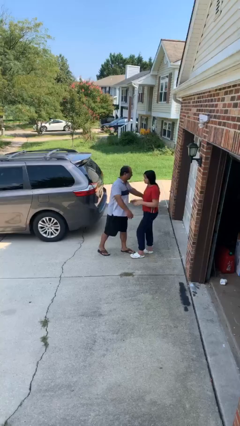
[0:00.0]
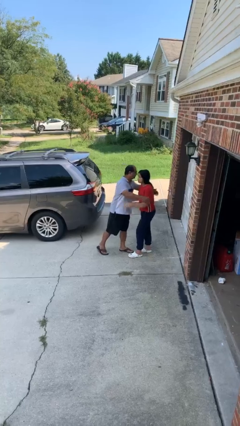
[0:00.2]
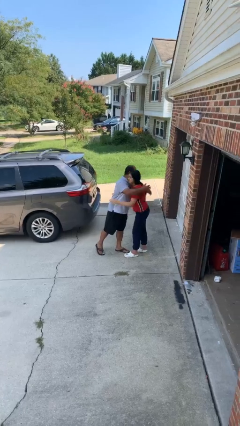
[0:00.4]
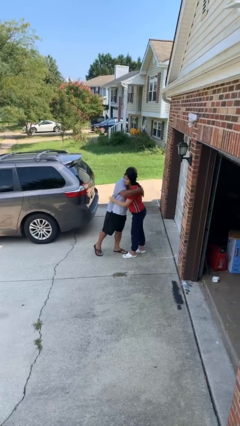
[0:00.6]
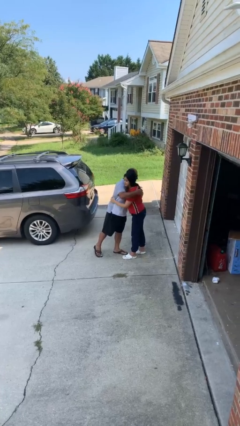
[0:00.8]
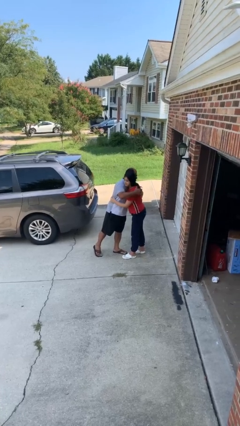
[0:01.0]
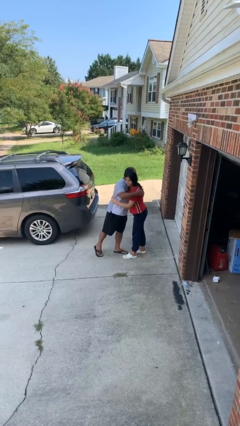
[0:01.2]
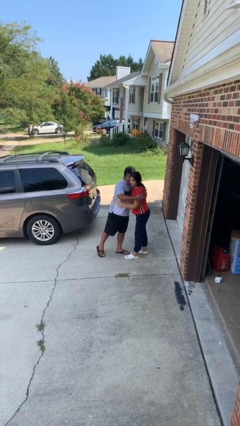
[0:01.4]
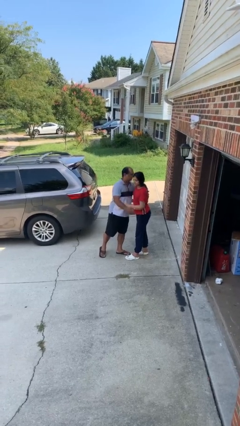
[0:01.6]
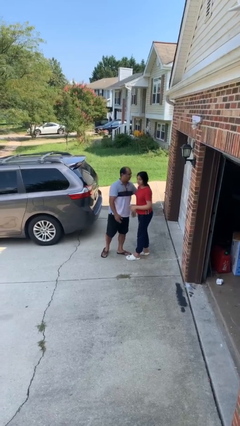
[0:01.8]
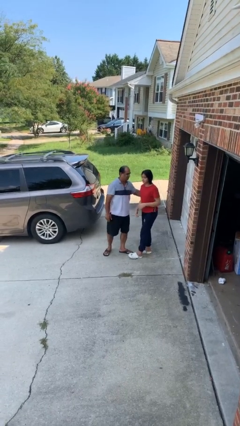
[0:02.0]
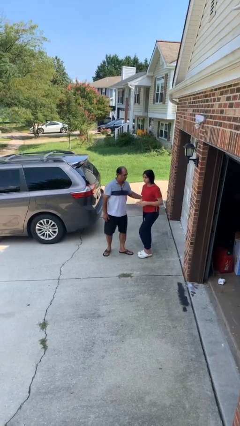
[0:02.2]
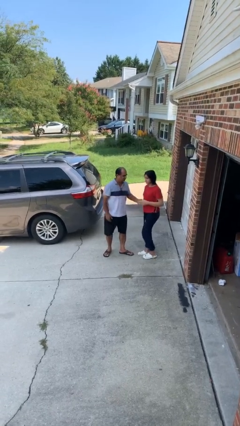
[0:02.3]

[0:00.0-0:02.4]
person embraces person

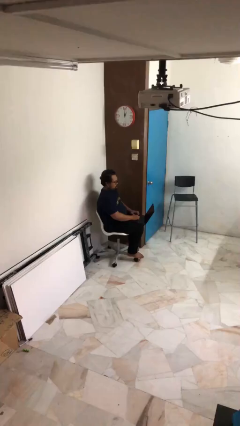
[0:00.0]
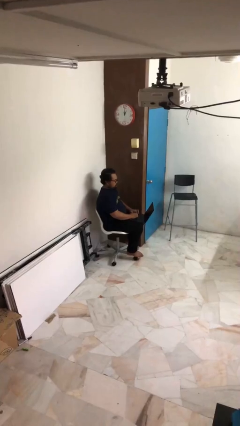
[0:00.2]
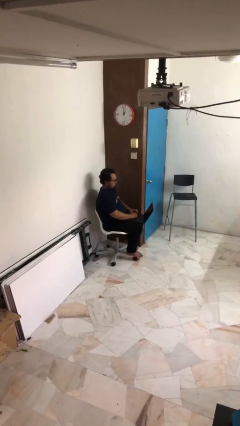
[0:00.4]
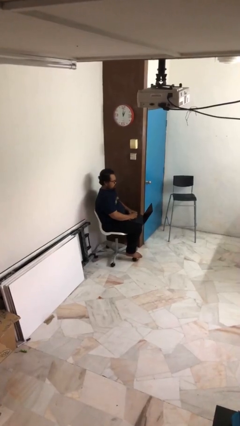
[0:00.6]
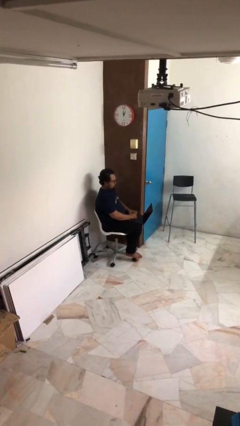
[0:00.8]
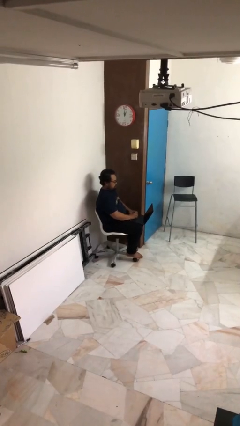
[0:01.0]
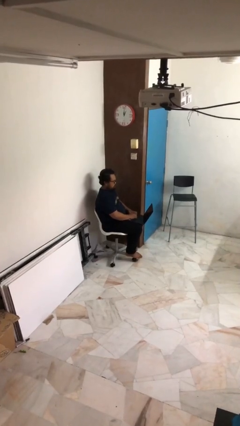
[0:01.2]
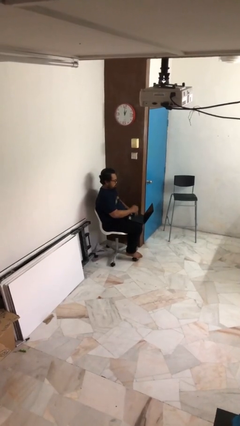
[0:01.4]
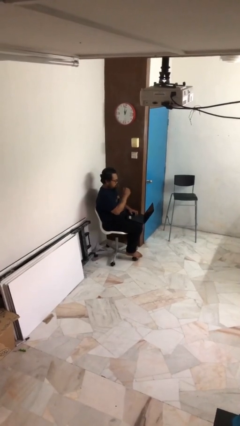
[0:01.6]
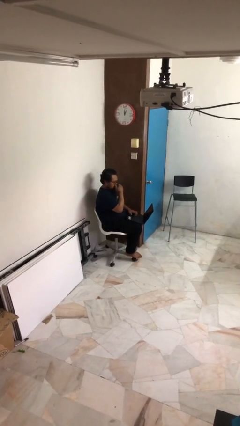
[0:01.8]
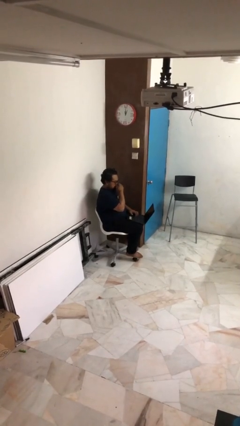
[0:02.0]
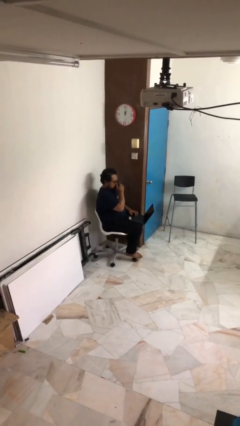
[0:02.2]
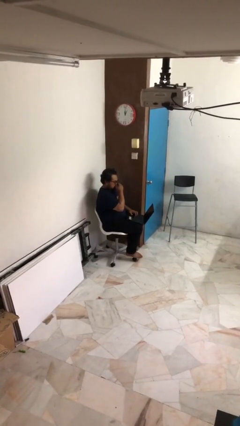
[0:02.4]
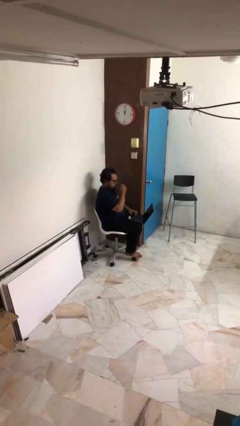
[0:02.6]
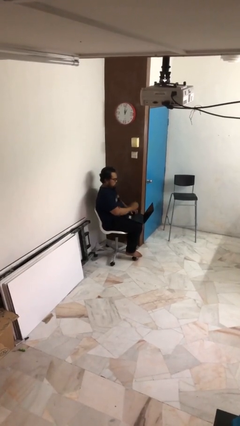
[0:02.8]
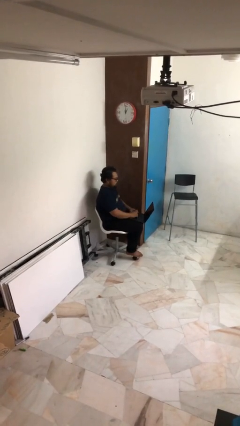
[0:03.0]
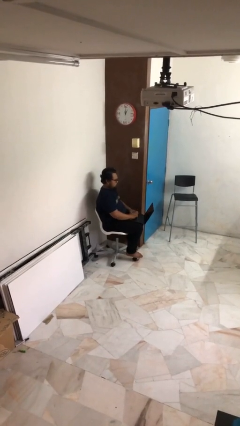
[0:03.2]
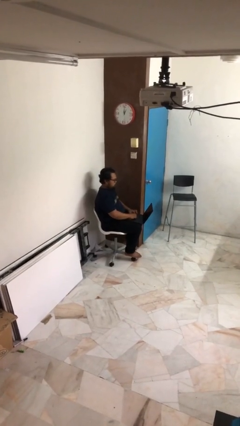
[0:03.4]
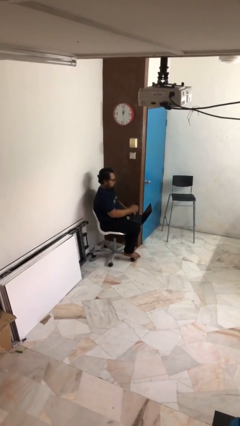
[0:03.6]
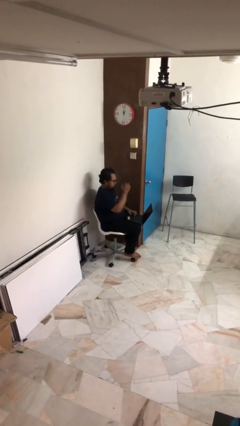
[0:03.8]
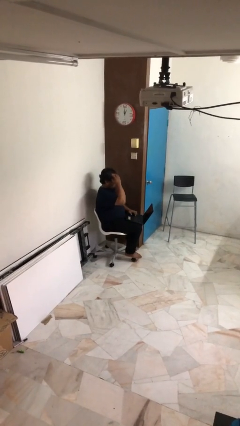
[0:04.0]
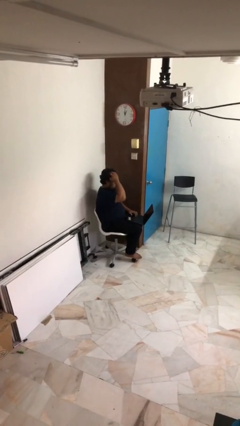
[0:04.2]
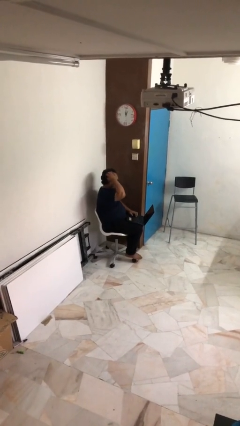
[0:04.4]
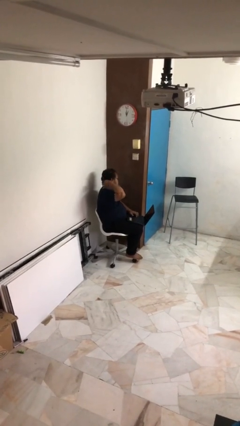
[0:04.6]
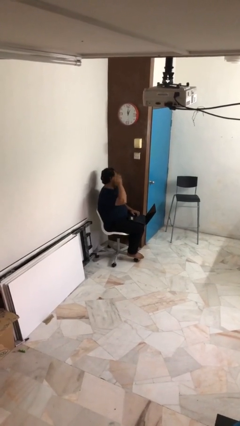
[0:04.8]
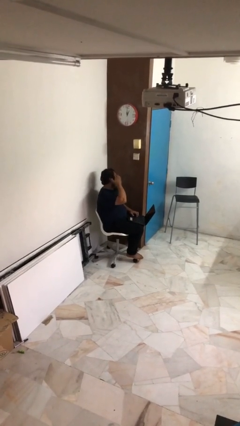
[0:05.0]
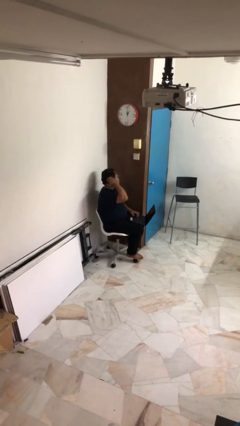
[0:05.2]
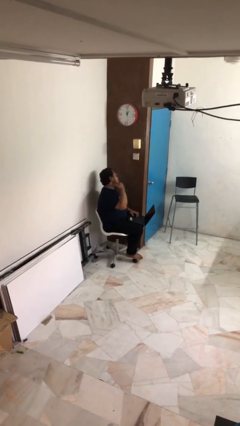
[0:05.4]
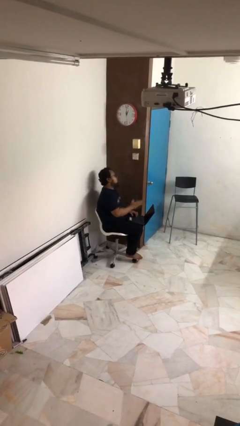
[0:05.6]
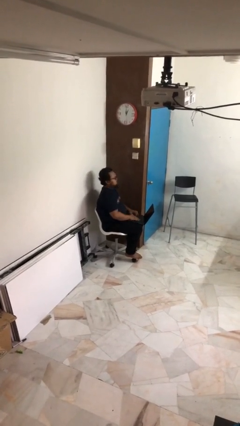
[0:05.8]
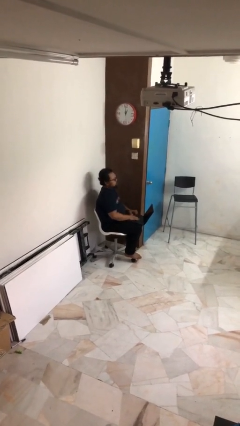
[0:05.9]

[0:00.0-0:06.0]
person interacts with laptop

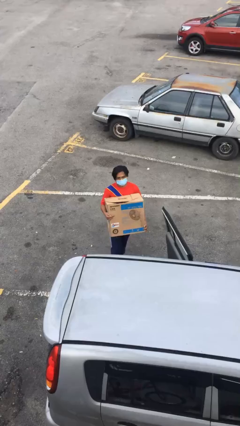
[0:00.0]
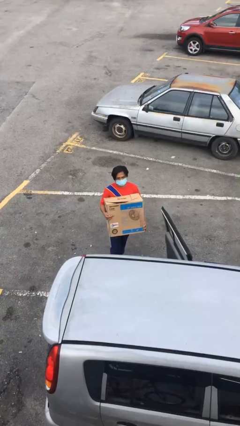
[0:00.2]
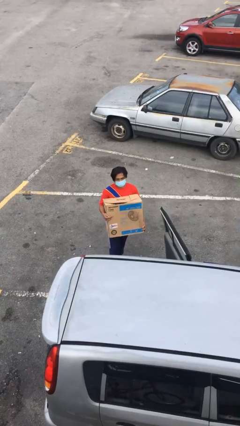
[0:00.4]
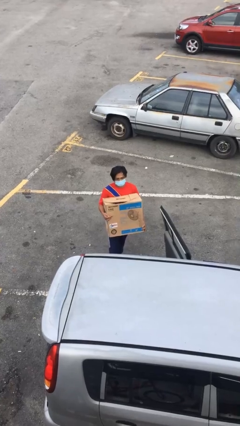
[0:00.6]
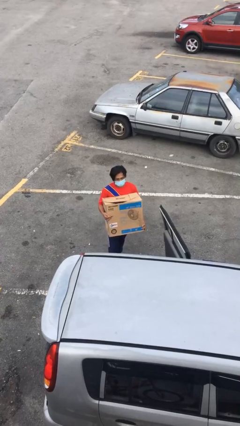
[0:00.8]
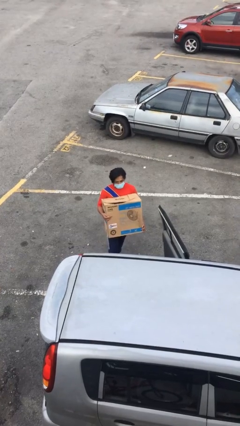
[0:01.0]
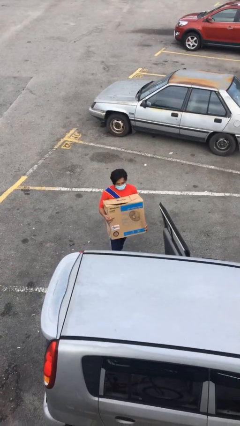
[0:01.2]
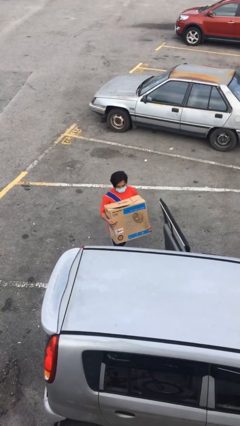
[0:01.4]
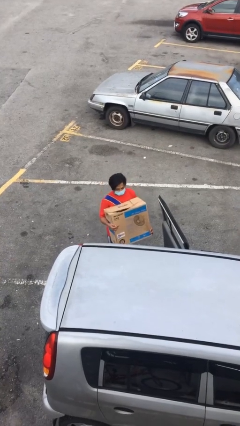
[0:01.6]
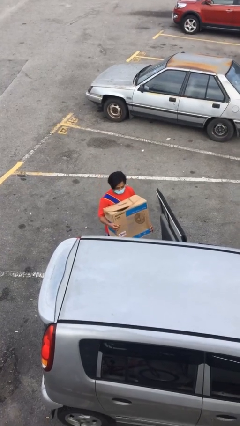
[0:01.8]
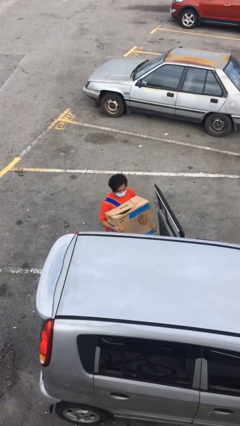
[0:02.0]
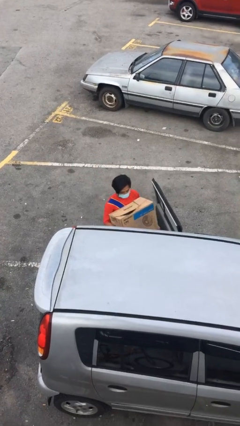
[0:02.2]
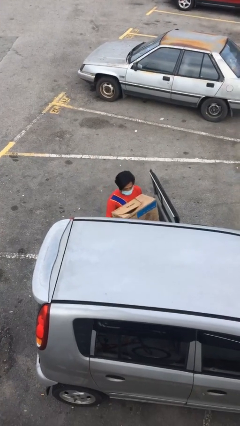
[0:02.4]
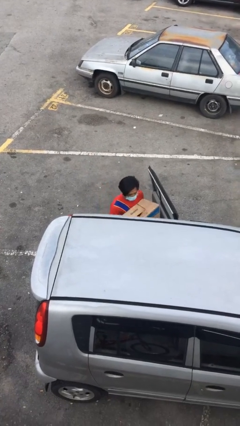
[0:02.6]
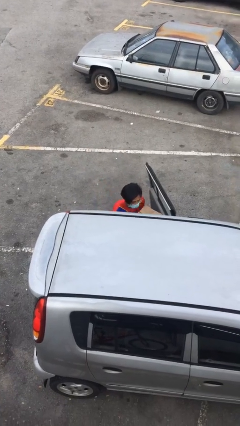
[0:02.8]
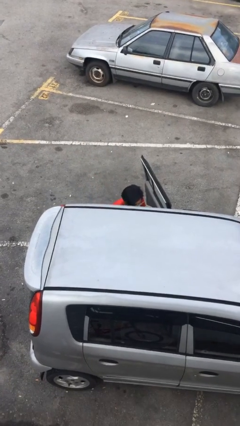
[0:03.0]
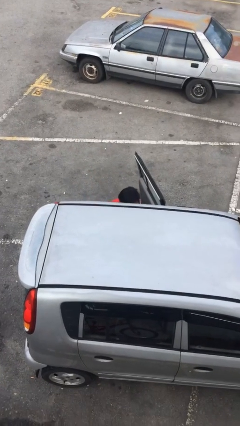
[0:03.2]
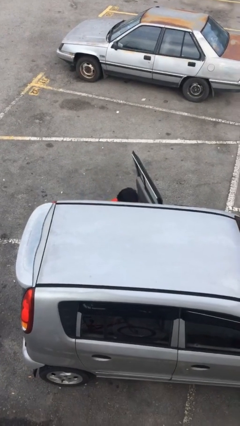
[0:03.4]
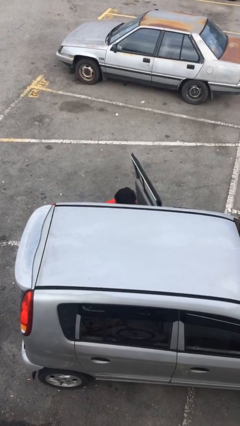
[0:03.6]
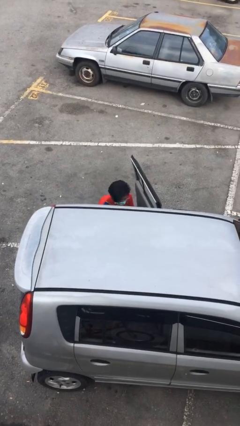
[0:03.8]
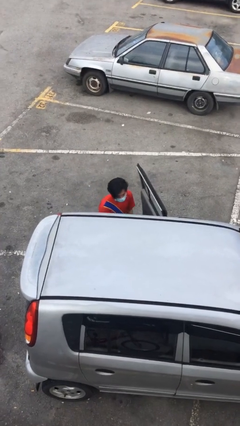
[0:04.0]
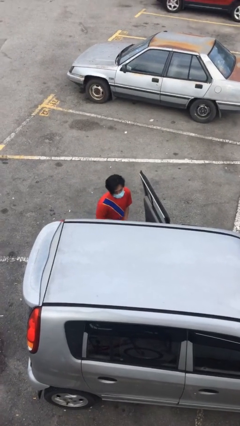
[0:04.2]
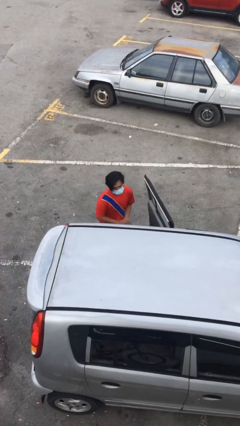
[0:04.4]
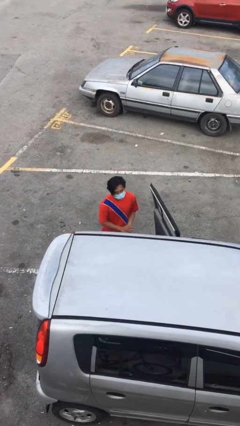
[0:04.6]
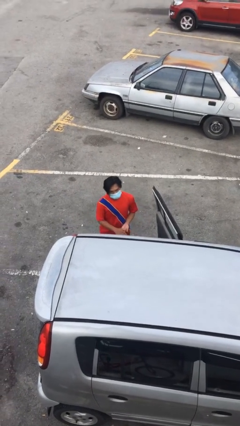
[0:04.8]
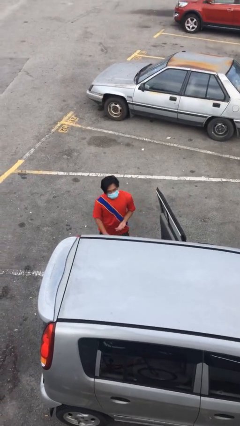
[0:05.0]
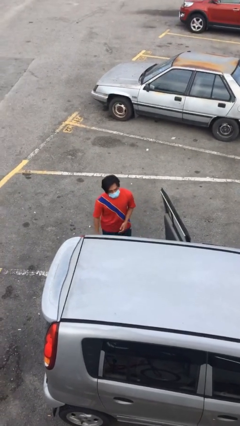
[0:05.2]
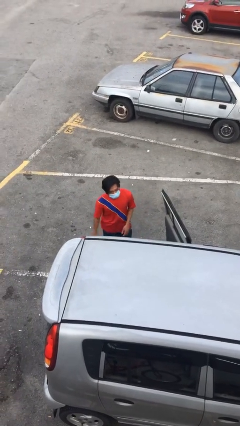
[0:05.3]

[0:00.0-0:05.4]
person loads car

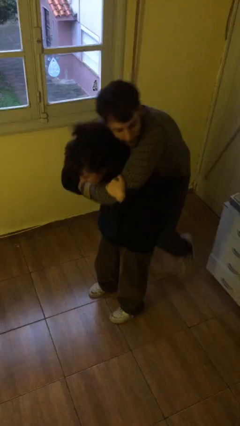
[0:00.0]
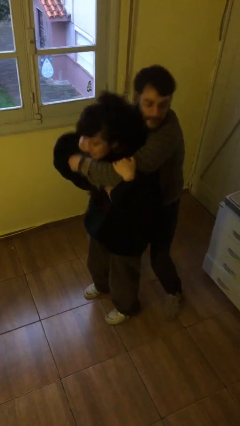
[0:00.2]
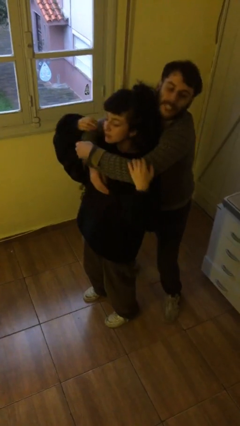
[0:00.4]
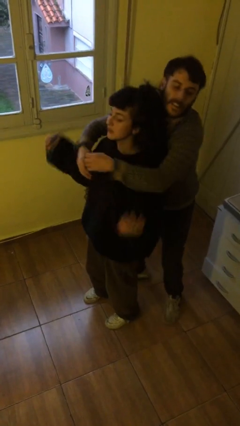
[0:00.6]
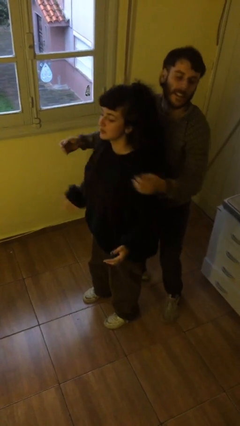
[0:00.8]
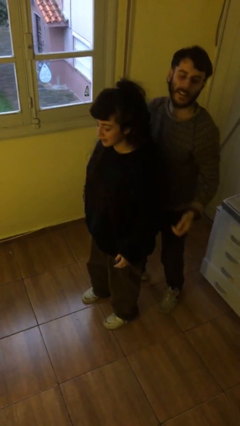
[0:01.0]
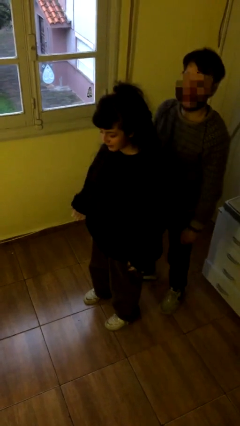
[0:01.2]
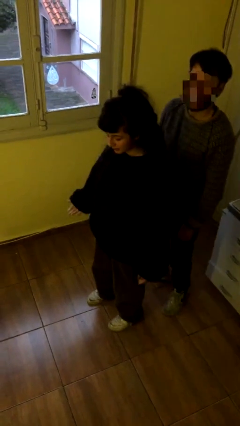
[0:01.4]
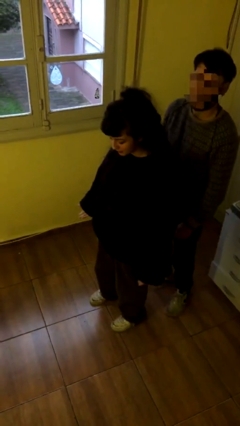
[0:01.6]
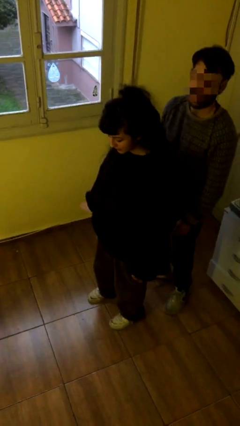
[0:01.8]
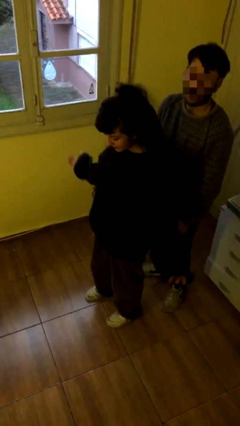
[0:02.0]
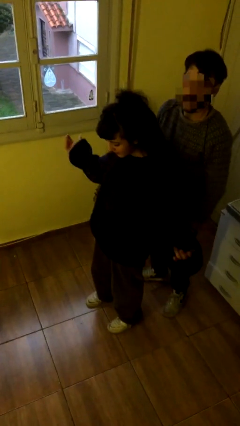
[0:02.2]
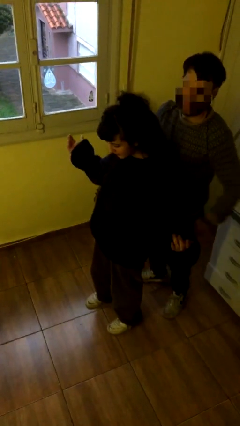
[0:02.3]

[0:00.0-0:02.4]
person puts down person

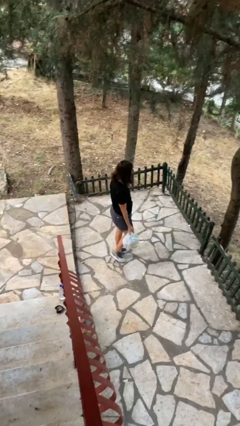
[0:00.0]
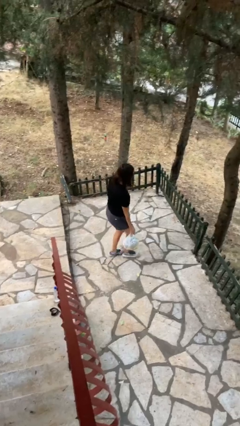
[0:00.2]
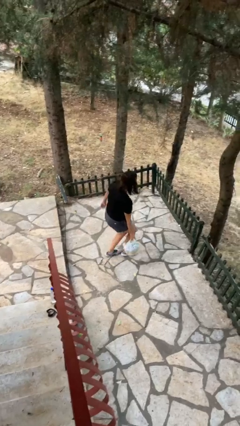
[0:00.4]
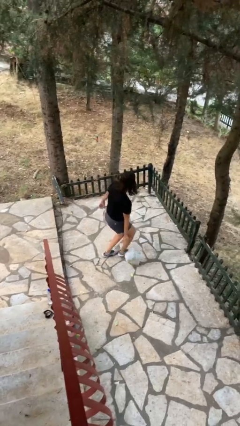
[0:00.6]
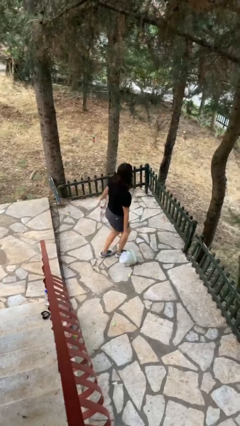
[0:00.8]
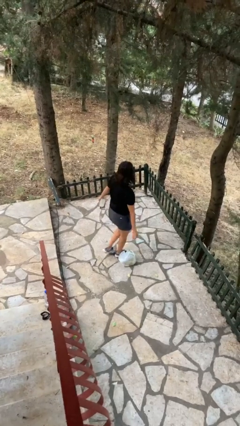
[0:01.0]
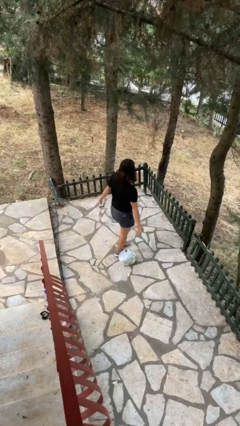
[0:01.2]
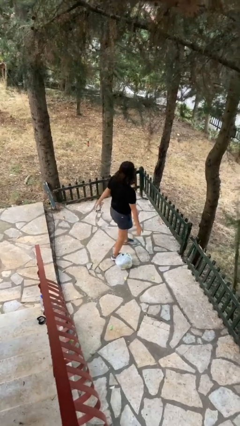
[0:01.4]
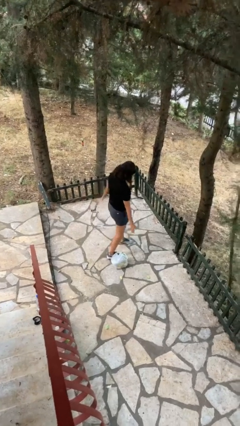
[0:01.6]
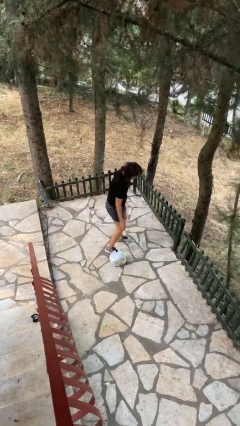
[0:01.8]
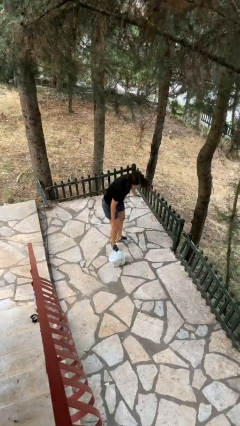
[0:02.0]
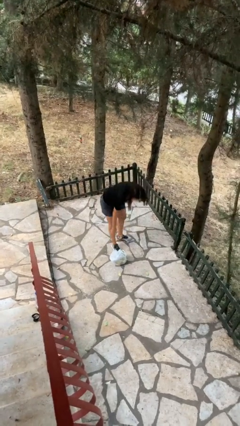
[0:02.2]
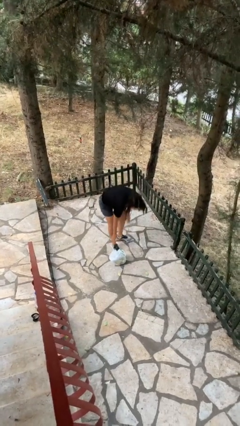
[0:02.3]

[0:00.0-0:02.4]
person drops object
